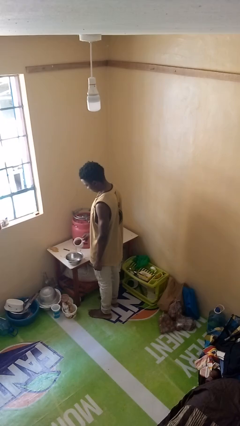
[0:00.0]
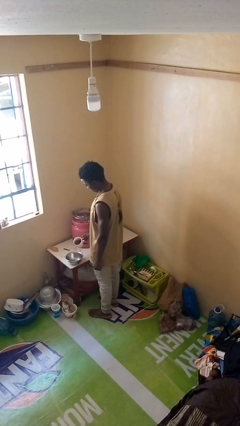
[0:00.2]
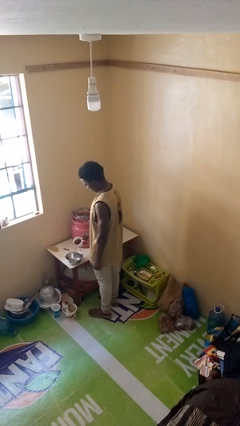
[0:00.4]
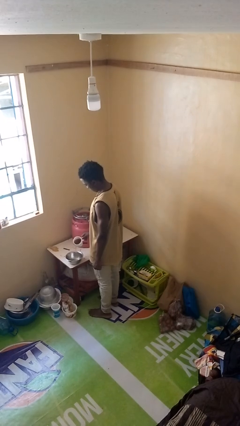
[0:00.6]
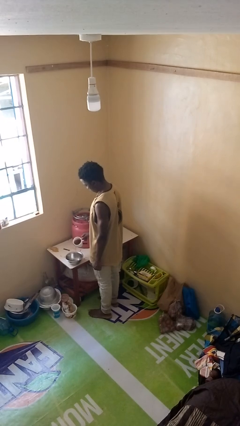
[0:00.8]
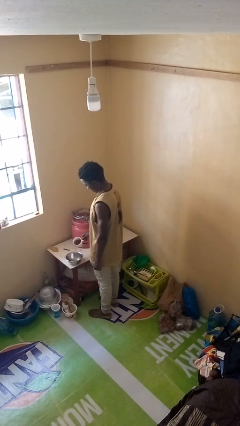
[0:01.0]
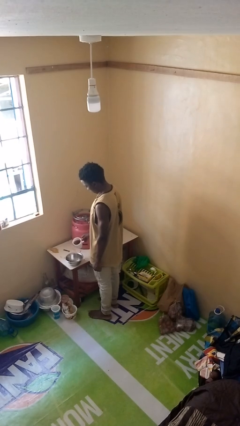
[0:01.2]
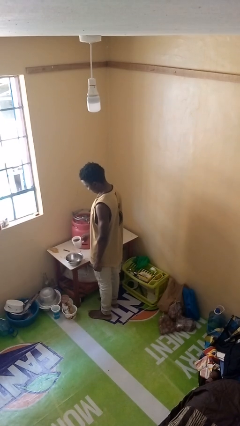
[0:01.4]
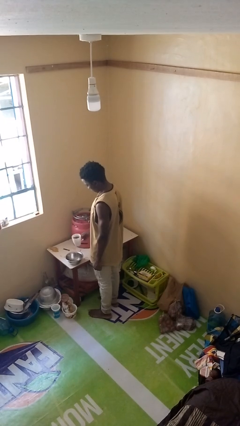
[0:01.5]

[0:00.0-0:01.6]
person pours into bowl

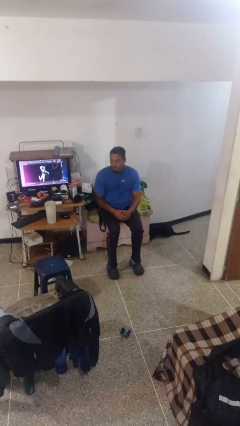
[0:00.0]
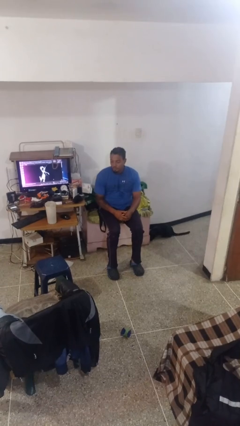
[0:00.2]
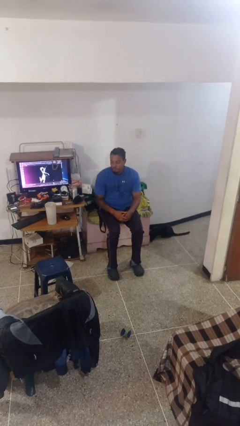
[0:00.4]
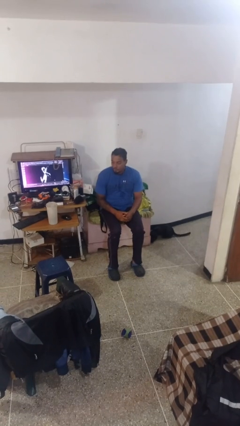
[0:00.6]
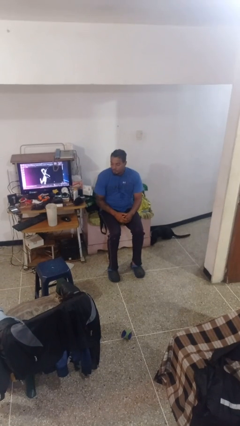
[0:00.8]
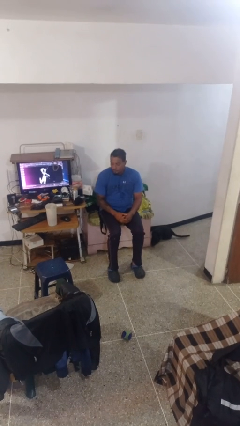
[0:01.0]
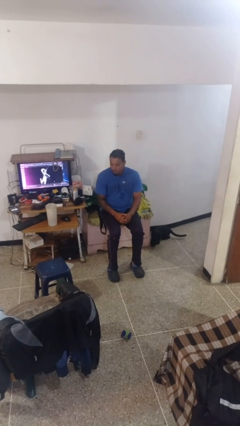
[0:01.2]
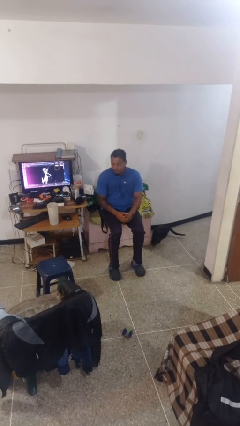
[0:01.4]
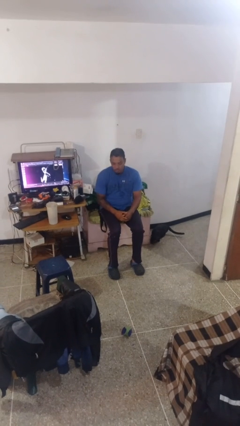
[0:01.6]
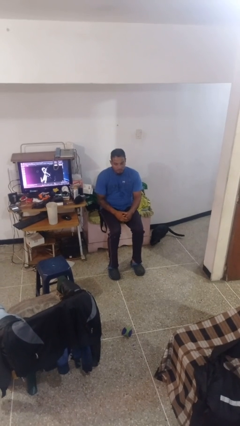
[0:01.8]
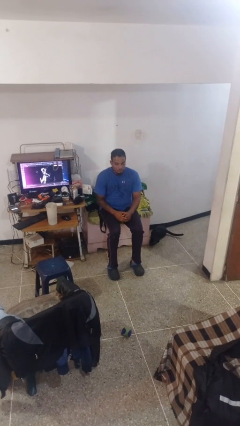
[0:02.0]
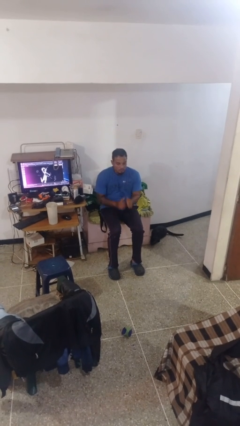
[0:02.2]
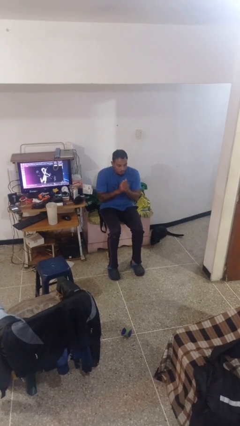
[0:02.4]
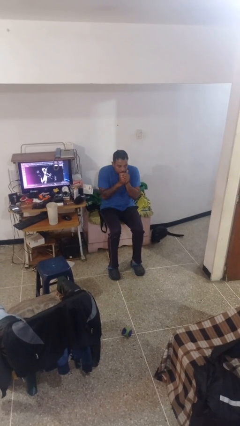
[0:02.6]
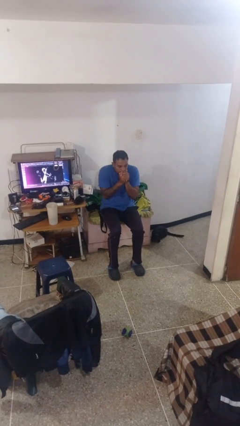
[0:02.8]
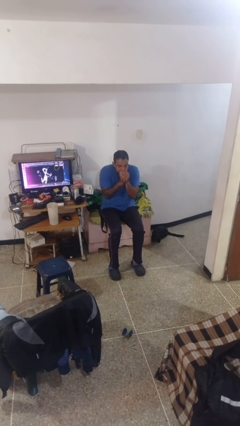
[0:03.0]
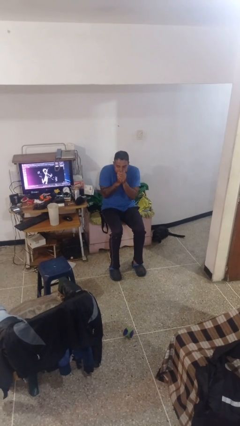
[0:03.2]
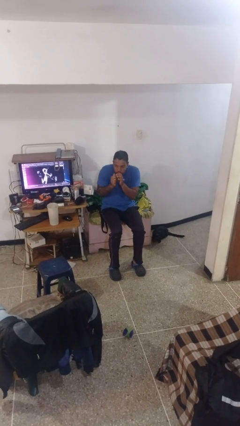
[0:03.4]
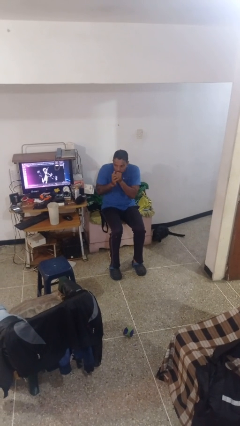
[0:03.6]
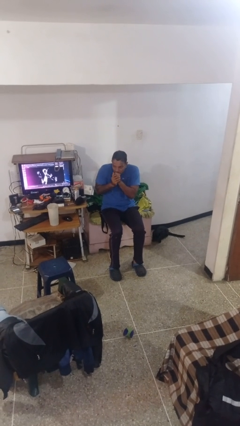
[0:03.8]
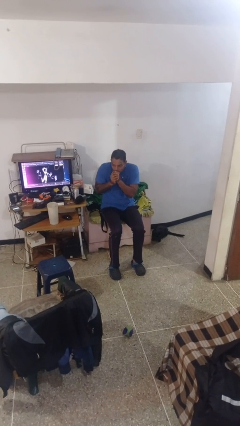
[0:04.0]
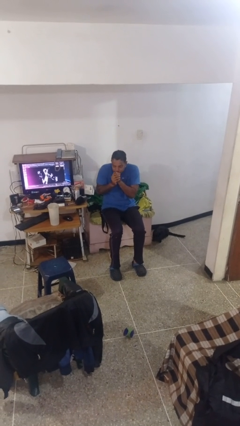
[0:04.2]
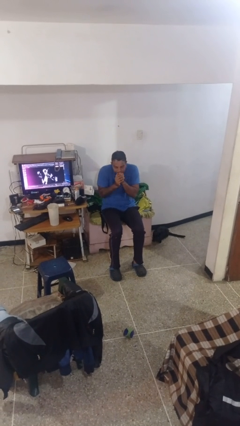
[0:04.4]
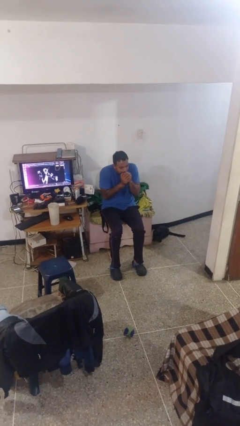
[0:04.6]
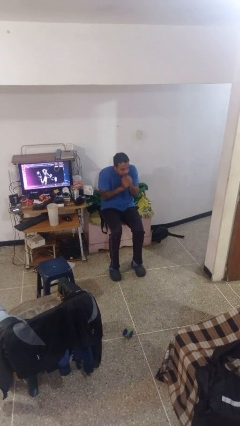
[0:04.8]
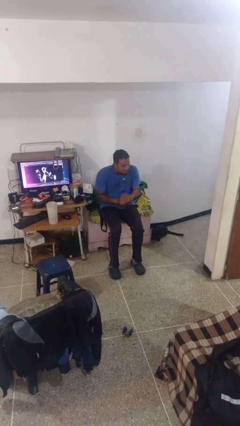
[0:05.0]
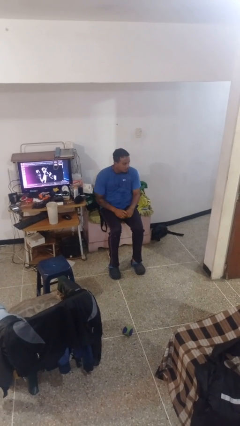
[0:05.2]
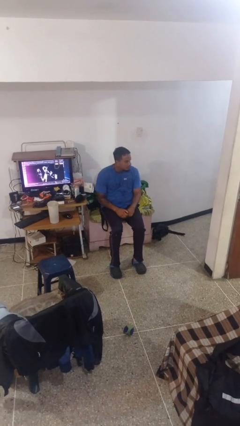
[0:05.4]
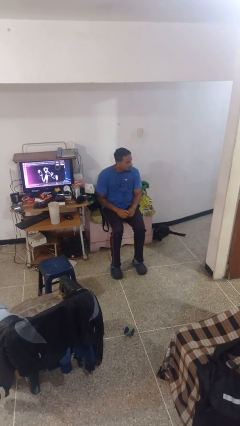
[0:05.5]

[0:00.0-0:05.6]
person blows into hands

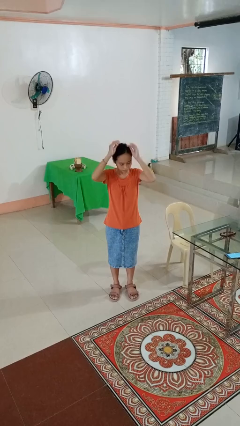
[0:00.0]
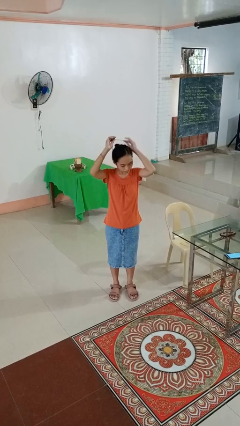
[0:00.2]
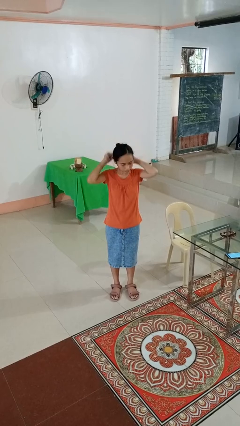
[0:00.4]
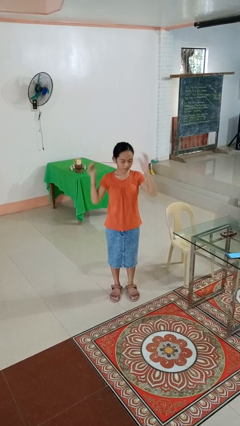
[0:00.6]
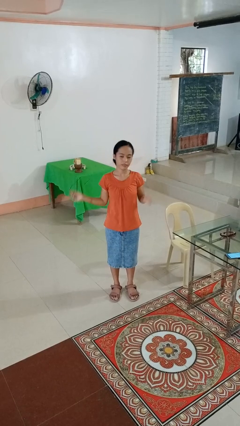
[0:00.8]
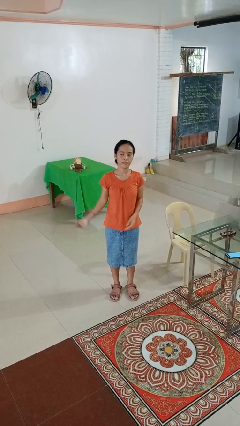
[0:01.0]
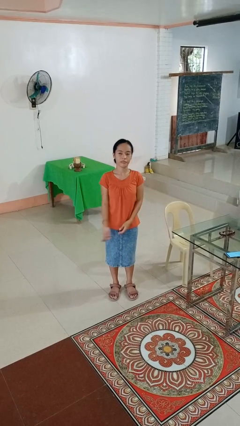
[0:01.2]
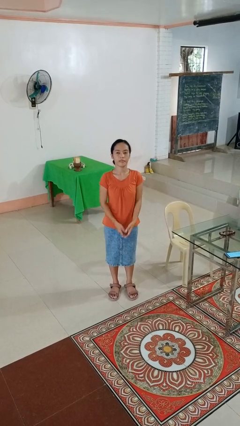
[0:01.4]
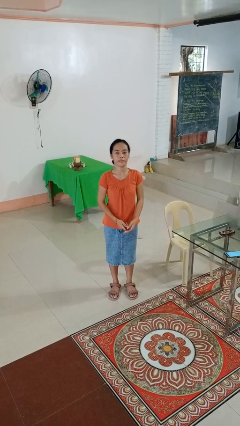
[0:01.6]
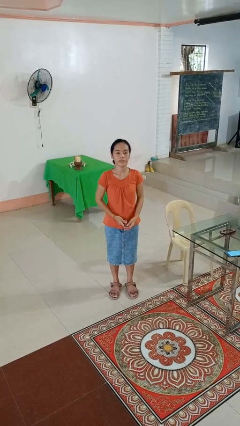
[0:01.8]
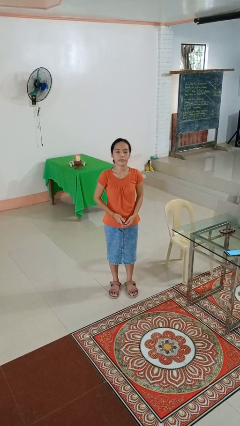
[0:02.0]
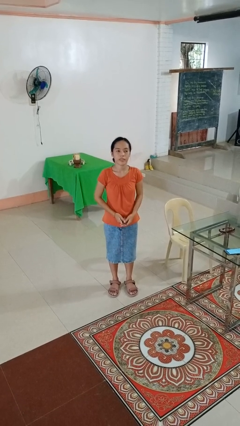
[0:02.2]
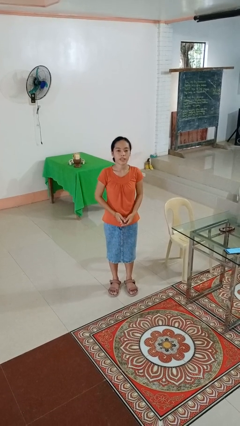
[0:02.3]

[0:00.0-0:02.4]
person takes off necklace

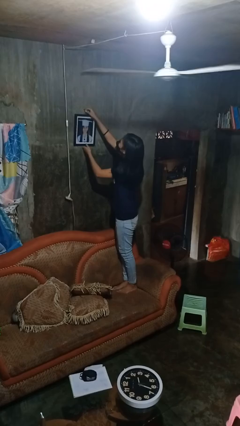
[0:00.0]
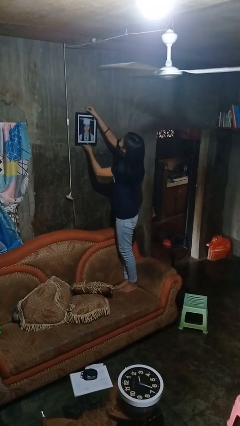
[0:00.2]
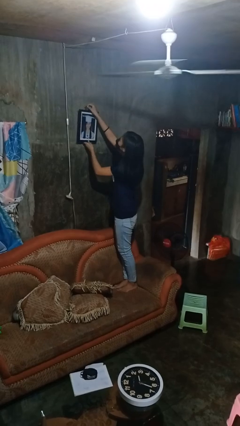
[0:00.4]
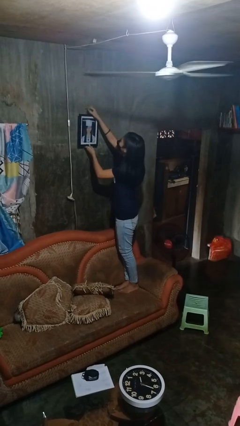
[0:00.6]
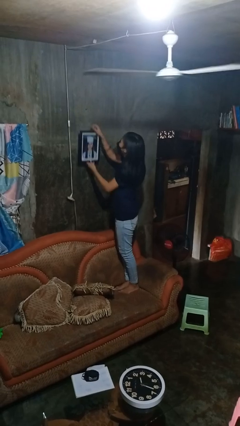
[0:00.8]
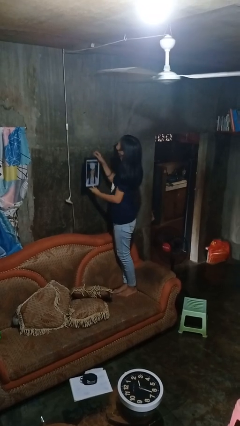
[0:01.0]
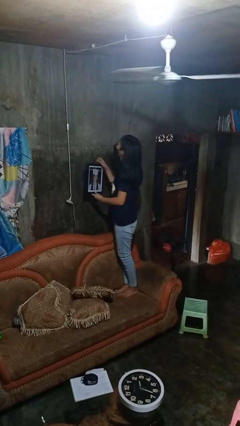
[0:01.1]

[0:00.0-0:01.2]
person takes down picture frame

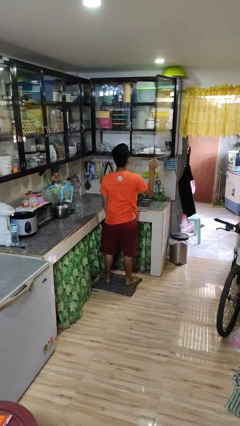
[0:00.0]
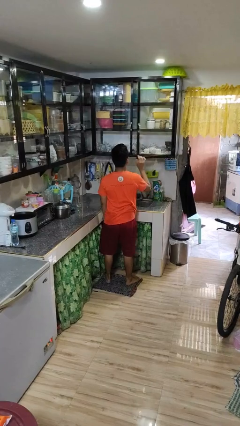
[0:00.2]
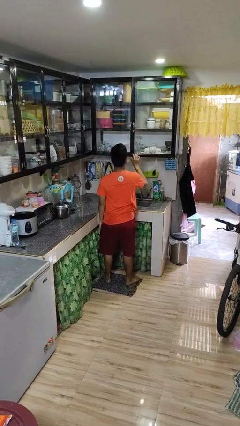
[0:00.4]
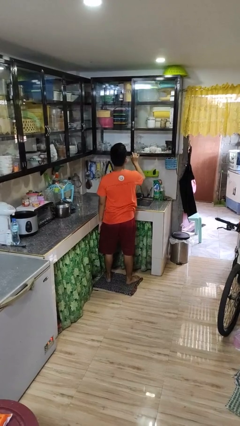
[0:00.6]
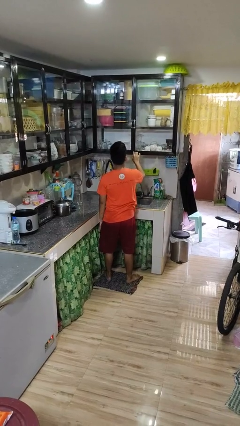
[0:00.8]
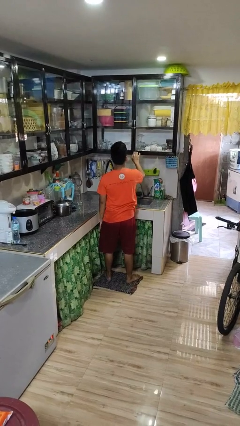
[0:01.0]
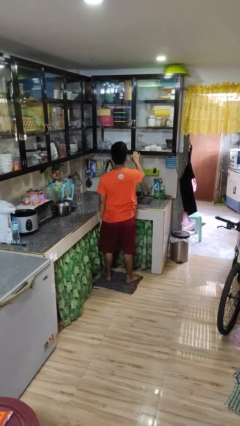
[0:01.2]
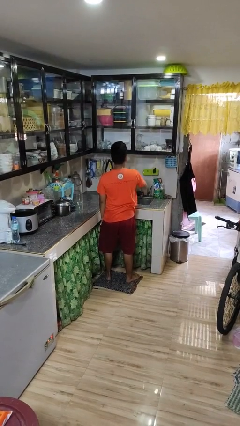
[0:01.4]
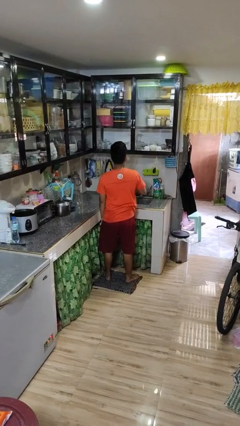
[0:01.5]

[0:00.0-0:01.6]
person closes cabinet

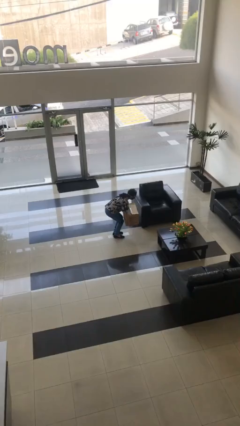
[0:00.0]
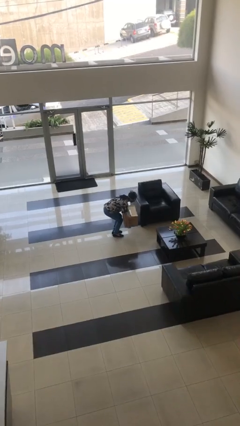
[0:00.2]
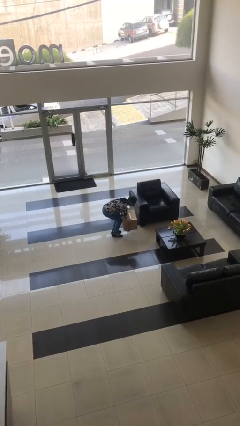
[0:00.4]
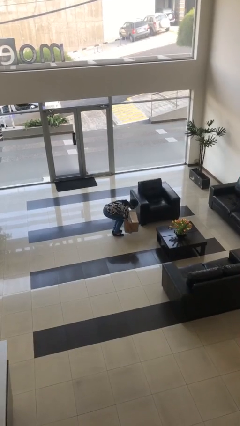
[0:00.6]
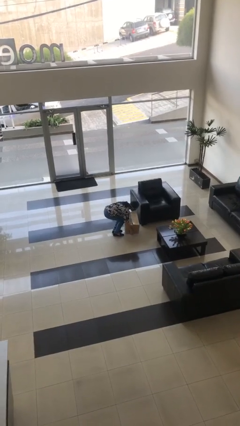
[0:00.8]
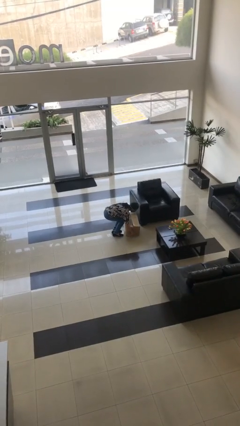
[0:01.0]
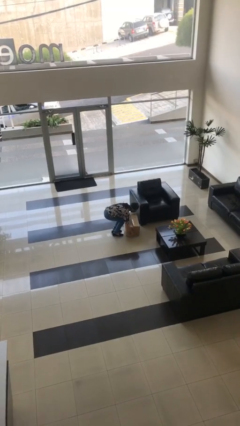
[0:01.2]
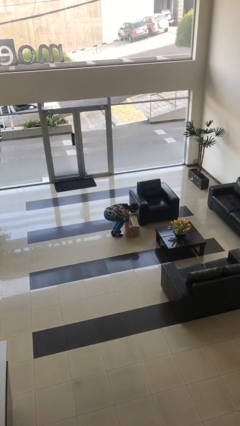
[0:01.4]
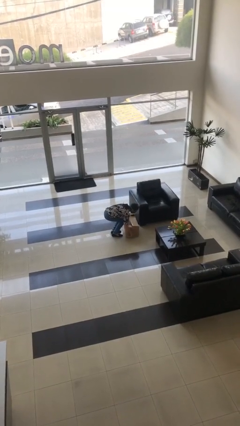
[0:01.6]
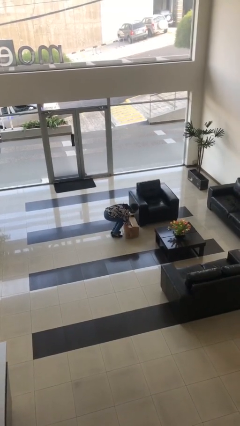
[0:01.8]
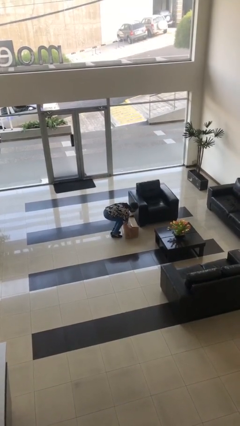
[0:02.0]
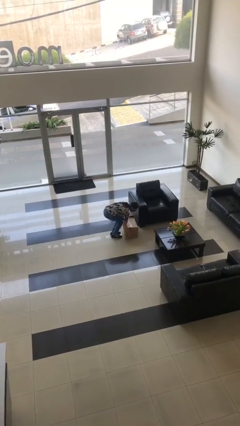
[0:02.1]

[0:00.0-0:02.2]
person puts down object on floor

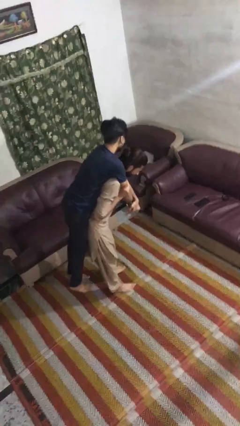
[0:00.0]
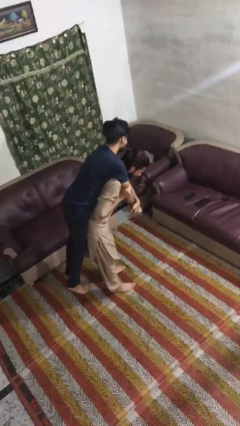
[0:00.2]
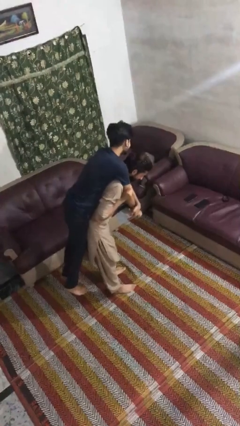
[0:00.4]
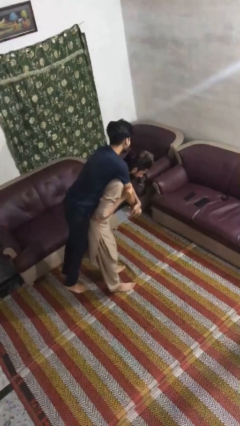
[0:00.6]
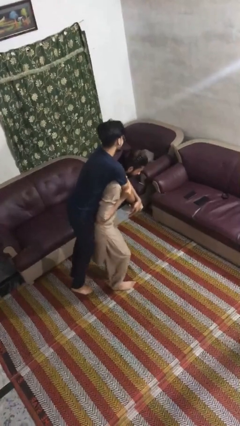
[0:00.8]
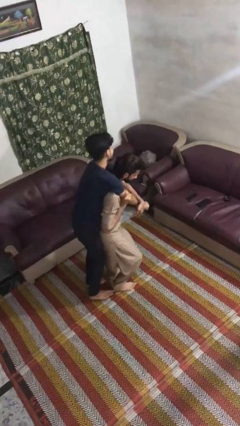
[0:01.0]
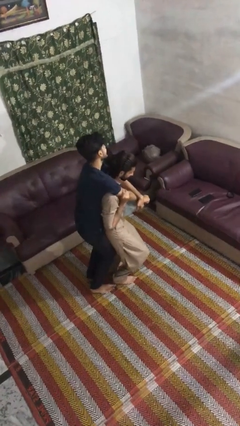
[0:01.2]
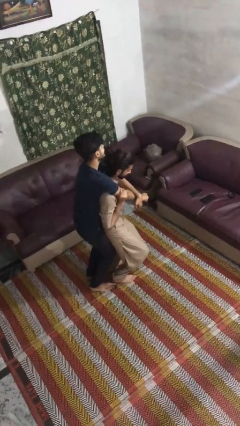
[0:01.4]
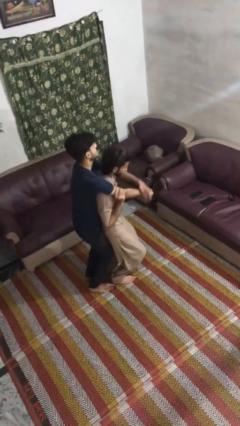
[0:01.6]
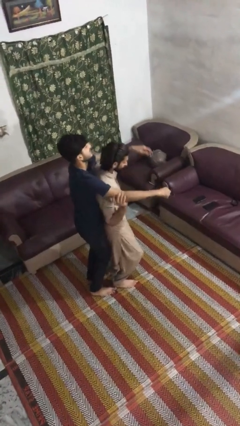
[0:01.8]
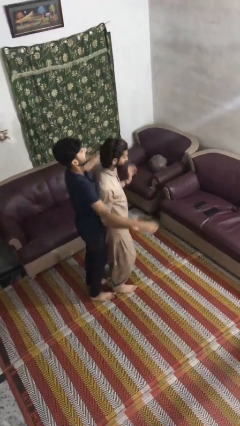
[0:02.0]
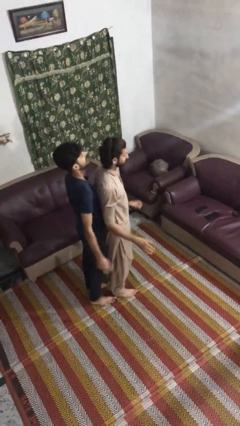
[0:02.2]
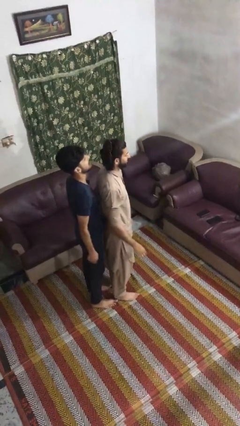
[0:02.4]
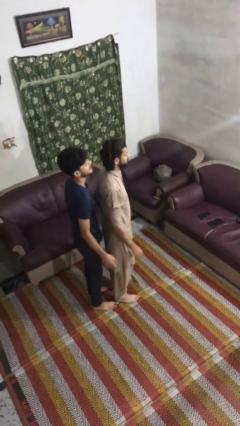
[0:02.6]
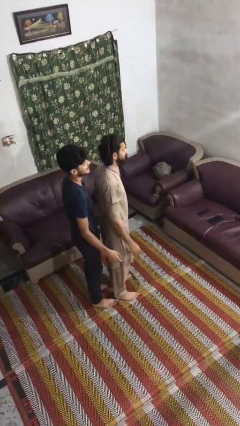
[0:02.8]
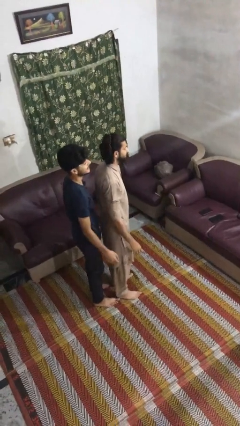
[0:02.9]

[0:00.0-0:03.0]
person puts down person
